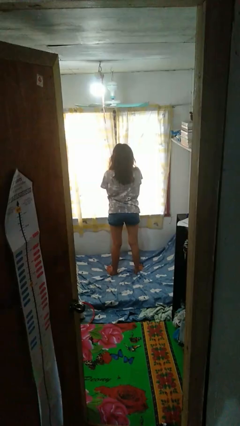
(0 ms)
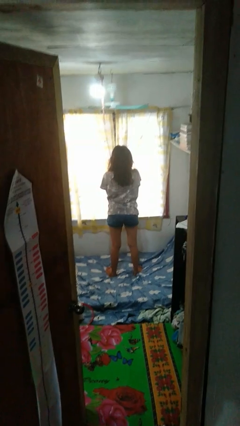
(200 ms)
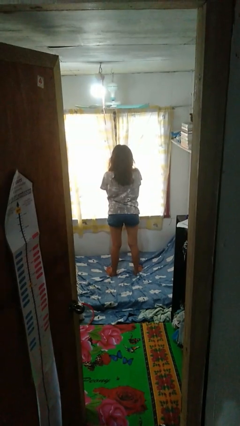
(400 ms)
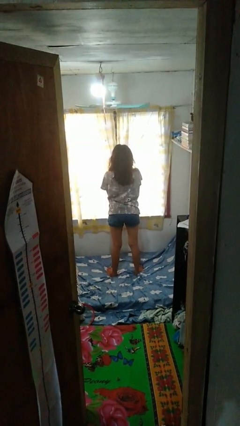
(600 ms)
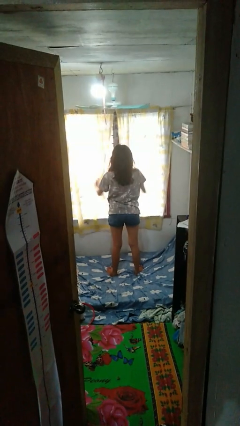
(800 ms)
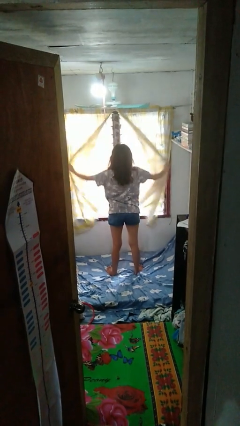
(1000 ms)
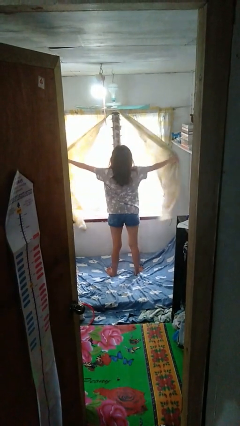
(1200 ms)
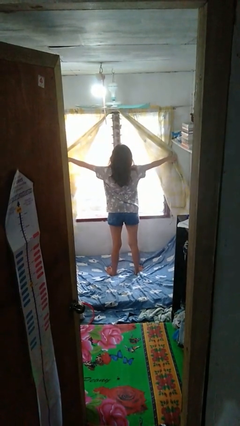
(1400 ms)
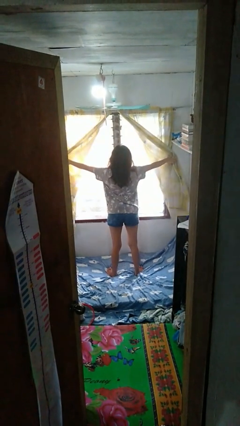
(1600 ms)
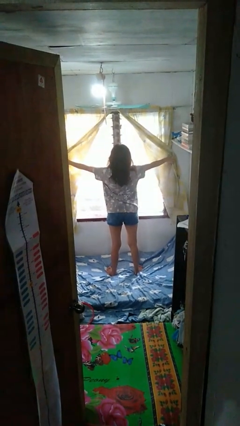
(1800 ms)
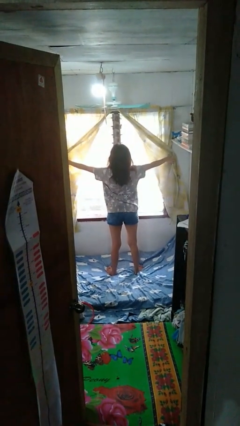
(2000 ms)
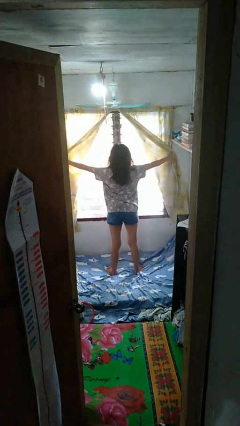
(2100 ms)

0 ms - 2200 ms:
person opens curtains

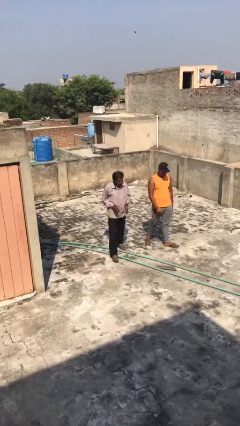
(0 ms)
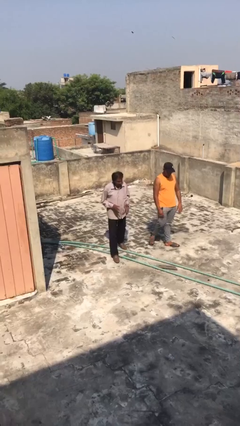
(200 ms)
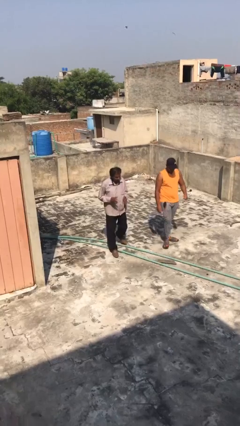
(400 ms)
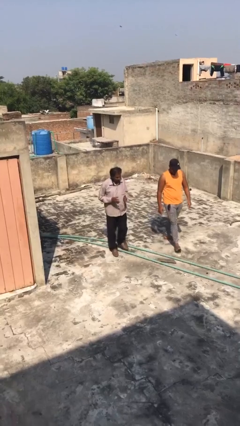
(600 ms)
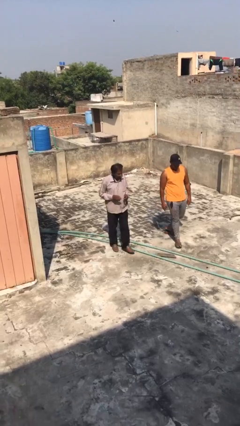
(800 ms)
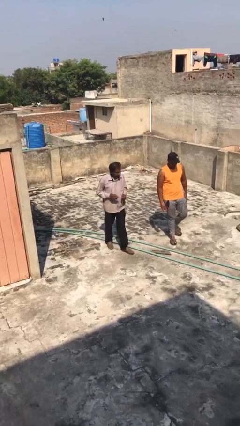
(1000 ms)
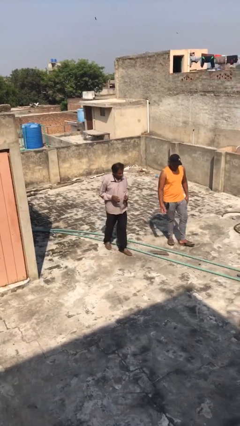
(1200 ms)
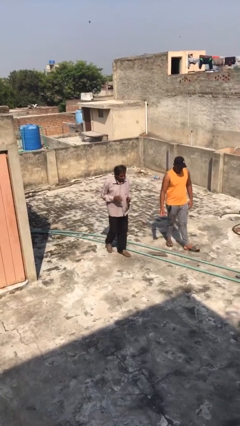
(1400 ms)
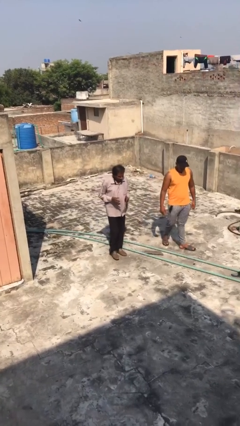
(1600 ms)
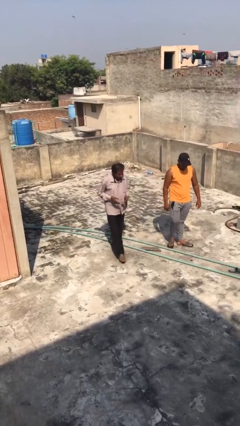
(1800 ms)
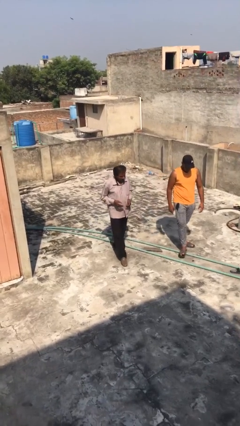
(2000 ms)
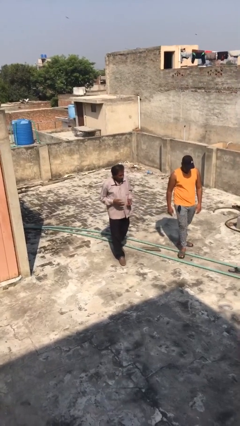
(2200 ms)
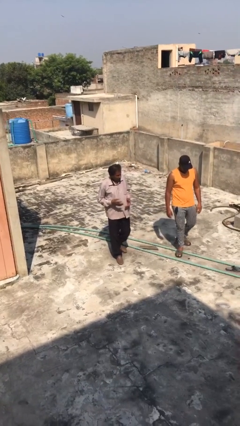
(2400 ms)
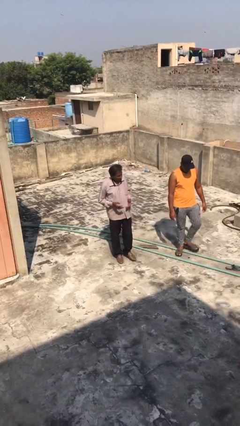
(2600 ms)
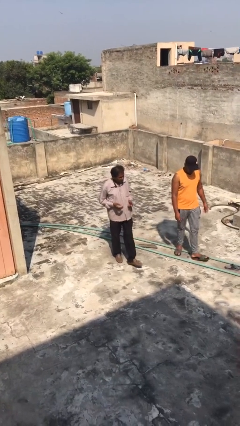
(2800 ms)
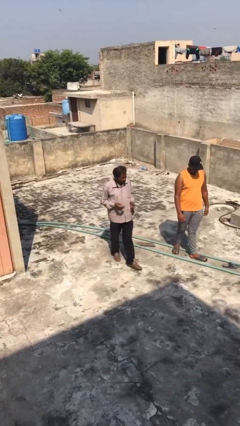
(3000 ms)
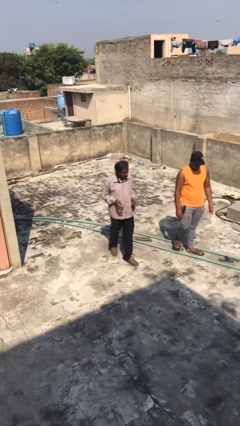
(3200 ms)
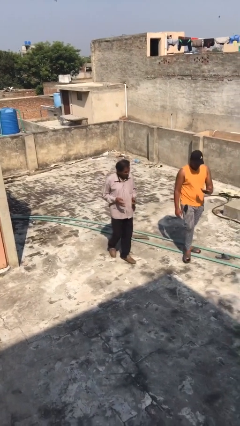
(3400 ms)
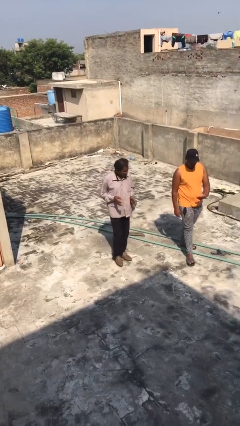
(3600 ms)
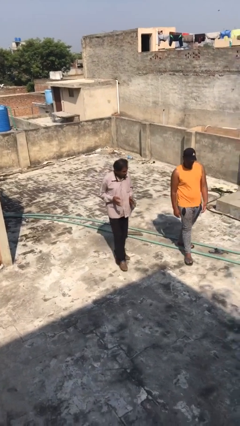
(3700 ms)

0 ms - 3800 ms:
person talks to person

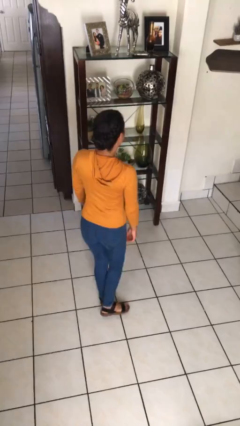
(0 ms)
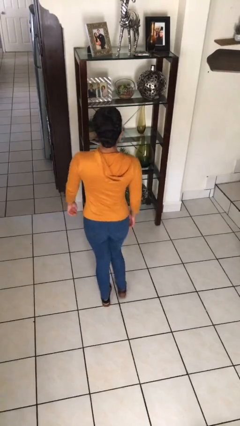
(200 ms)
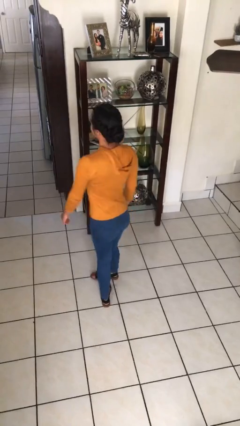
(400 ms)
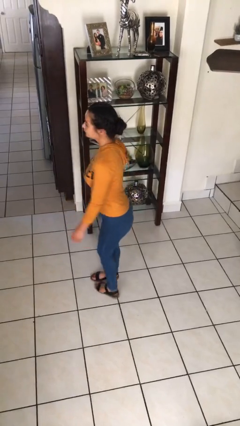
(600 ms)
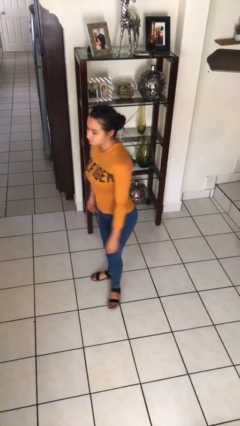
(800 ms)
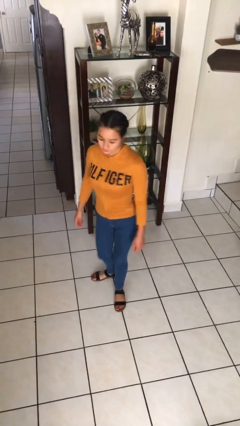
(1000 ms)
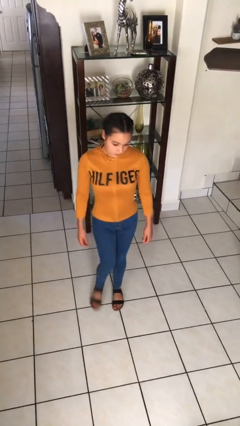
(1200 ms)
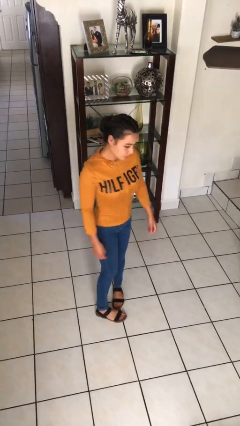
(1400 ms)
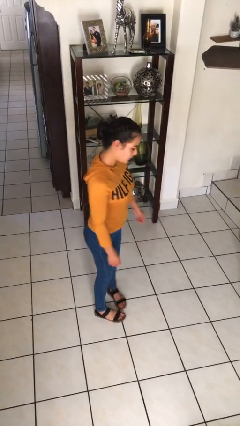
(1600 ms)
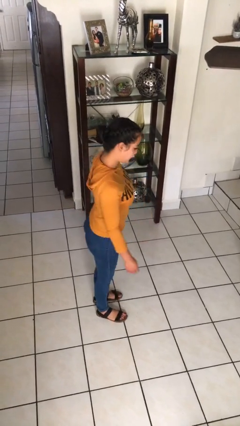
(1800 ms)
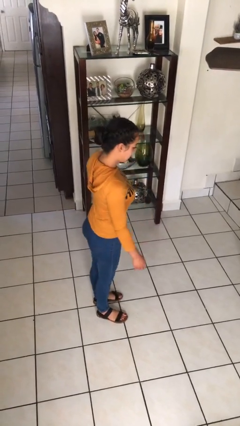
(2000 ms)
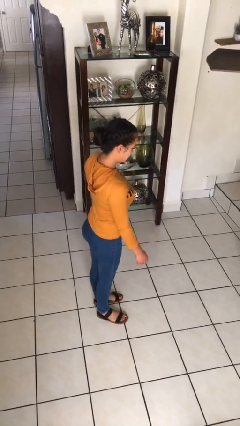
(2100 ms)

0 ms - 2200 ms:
person twirls

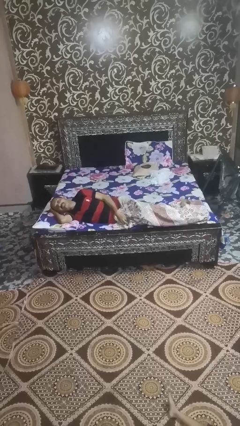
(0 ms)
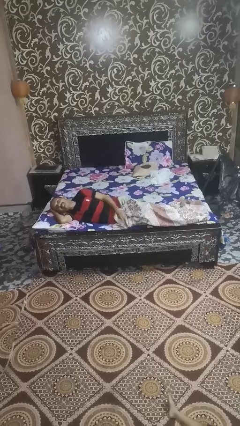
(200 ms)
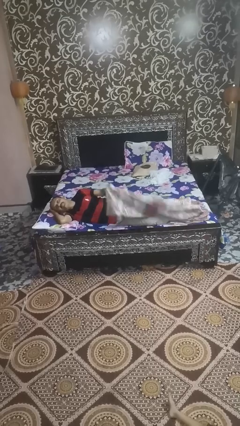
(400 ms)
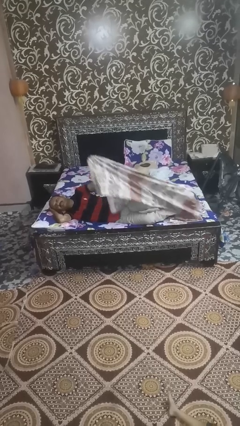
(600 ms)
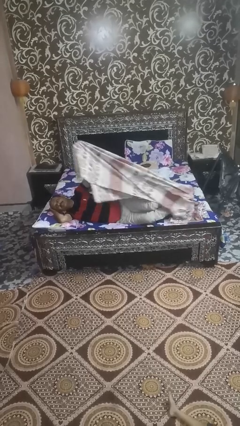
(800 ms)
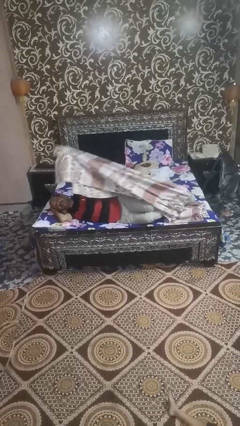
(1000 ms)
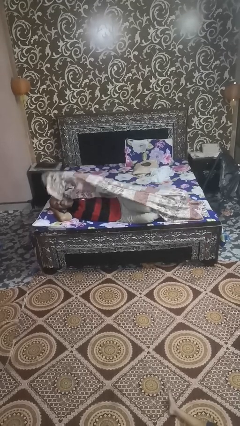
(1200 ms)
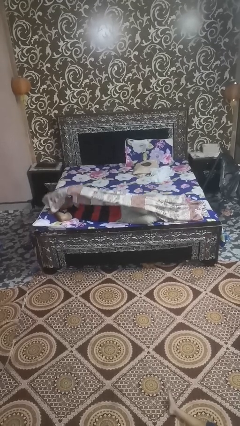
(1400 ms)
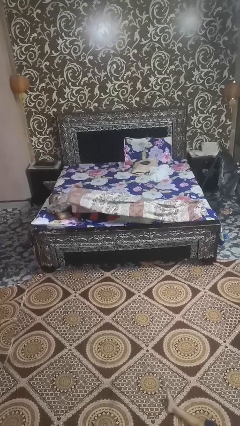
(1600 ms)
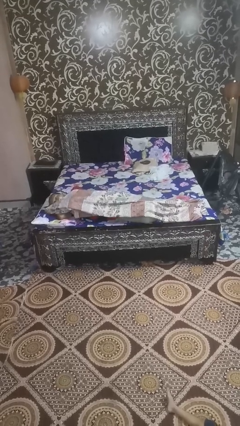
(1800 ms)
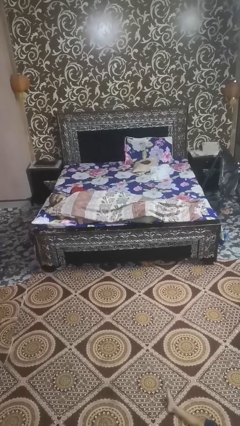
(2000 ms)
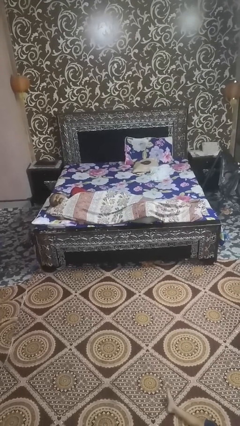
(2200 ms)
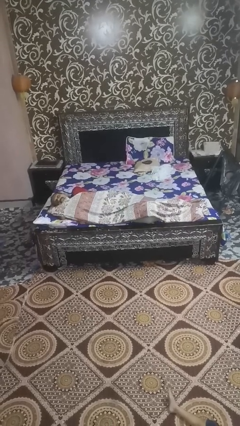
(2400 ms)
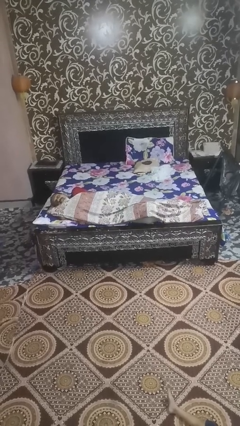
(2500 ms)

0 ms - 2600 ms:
person covers with bedsheets

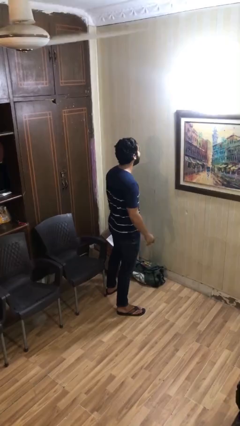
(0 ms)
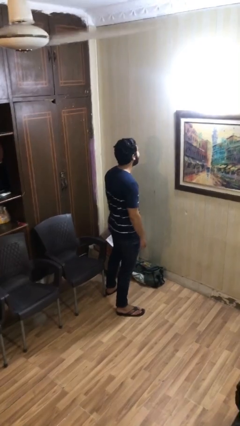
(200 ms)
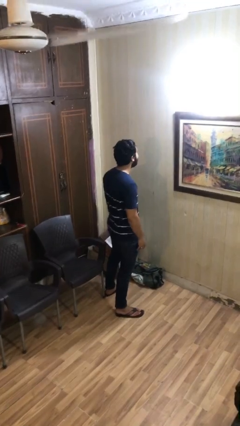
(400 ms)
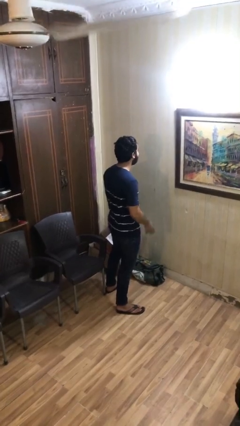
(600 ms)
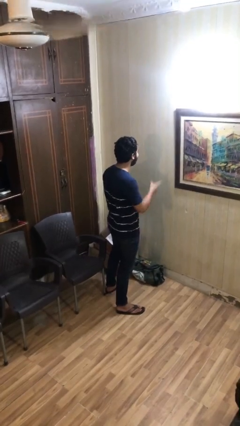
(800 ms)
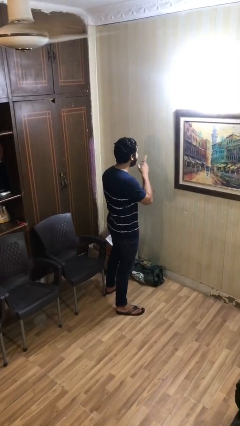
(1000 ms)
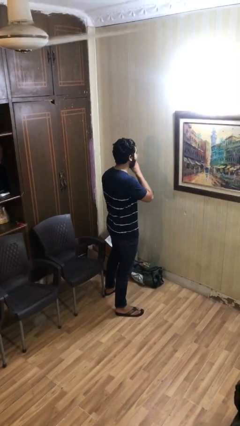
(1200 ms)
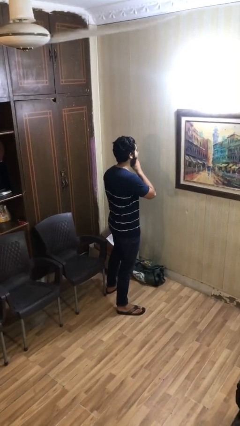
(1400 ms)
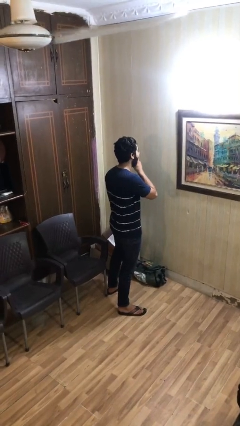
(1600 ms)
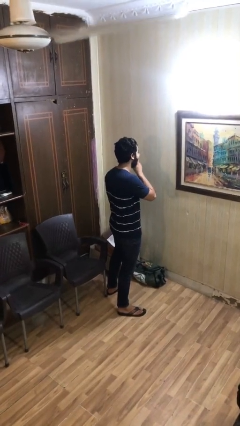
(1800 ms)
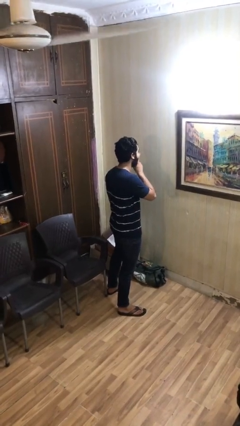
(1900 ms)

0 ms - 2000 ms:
person gestures be quiet

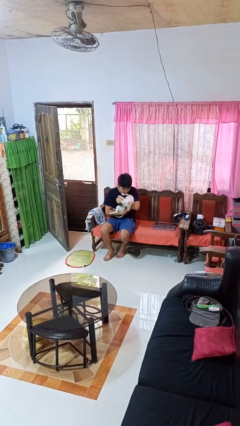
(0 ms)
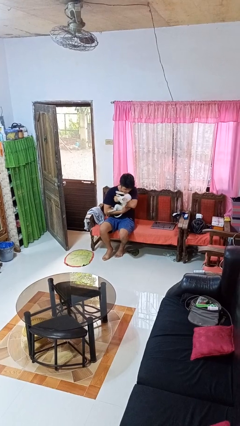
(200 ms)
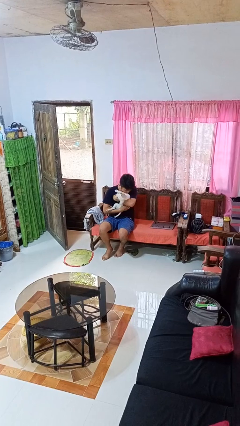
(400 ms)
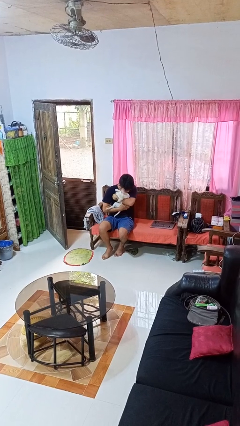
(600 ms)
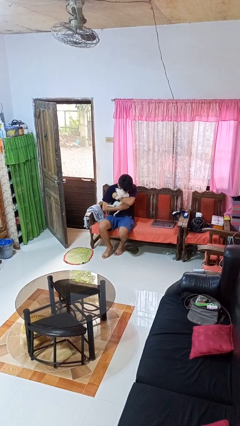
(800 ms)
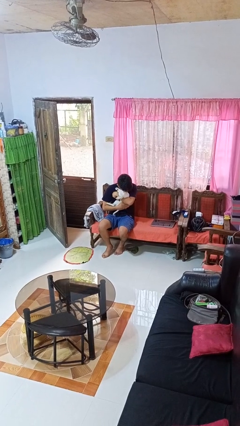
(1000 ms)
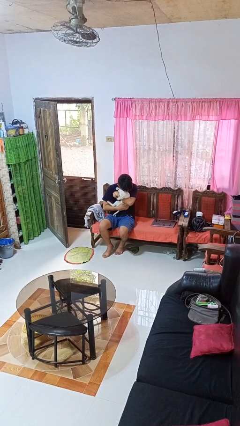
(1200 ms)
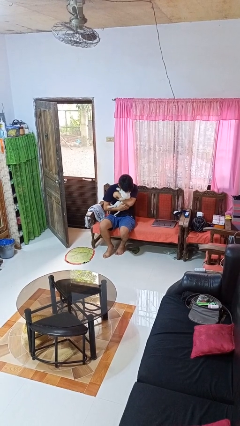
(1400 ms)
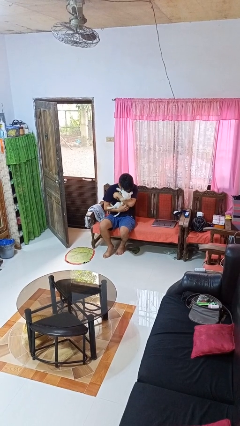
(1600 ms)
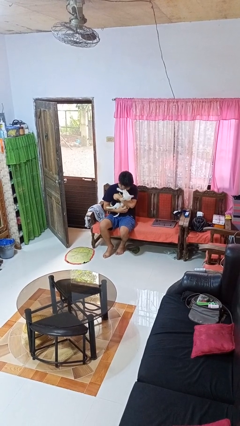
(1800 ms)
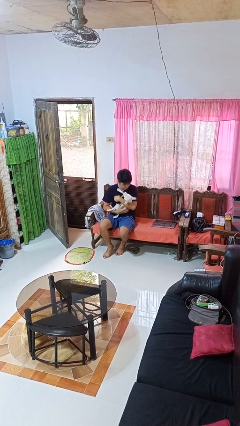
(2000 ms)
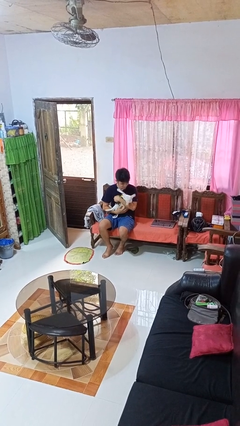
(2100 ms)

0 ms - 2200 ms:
person hugs dog

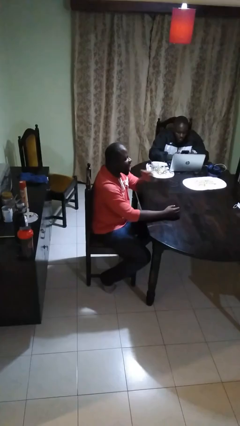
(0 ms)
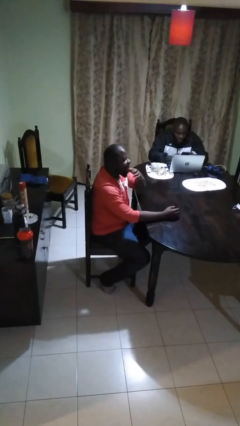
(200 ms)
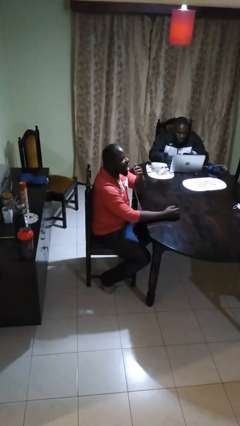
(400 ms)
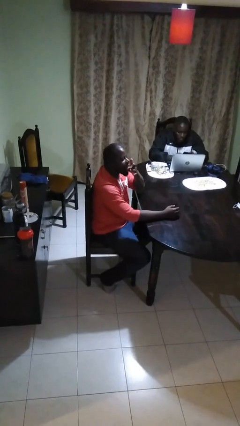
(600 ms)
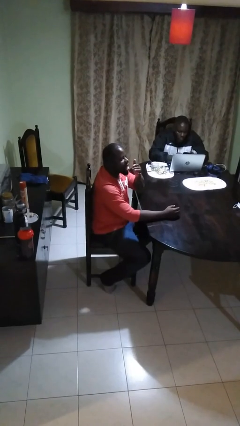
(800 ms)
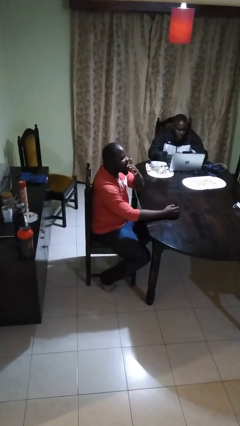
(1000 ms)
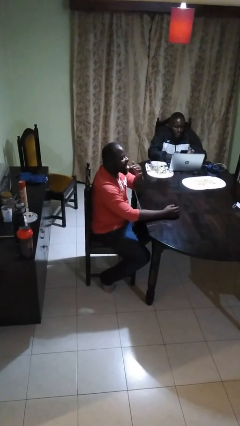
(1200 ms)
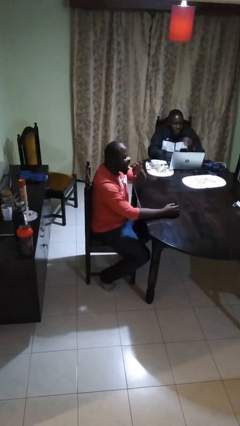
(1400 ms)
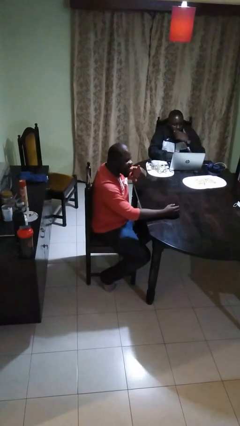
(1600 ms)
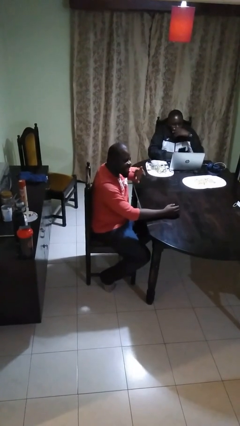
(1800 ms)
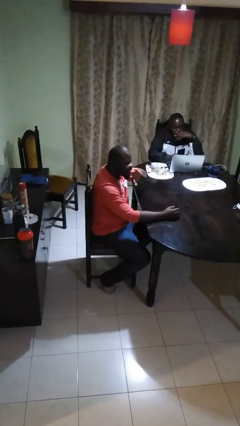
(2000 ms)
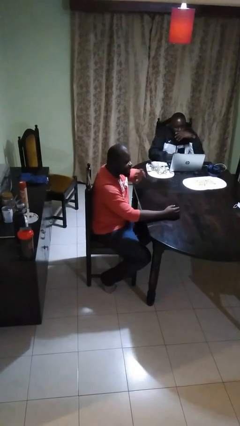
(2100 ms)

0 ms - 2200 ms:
person licks fingers
